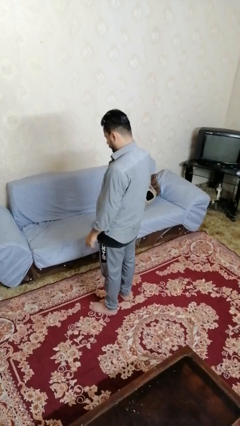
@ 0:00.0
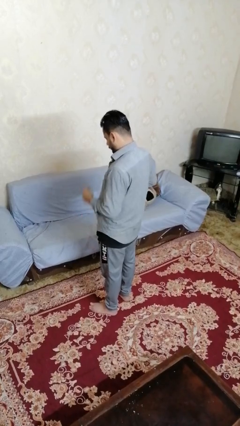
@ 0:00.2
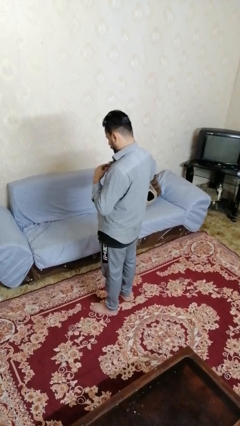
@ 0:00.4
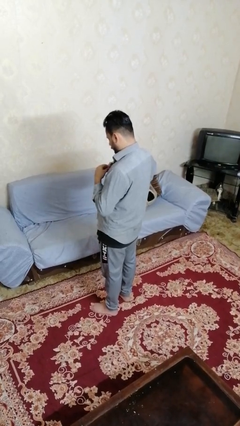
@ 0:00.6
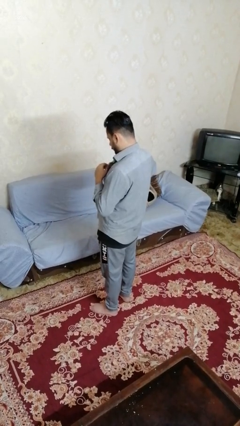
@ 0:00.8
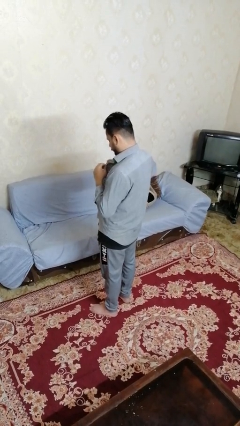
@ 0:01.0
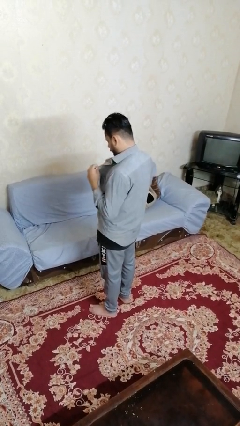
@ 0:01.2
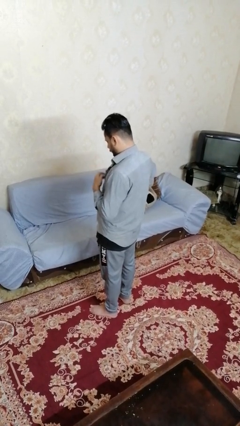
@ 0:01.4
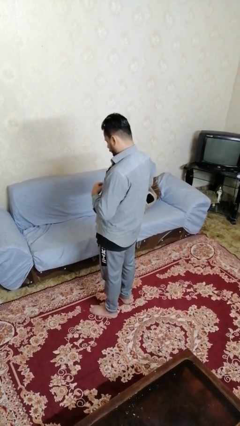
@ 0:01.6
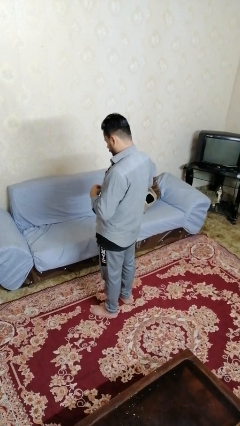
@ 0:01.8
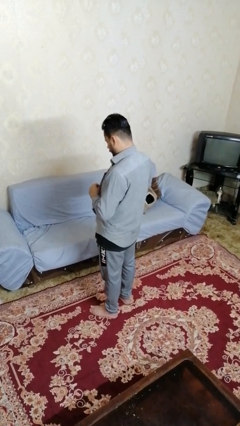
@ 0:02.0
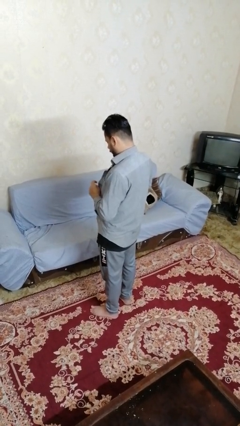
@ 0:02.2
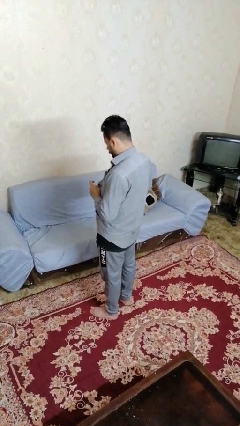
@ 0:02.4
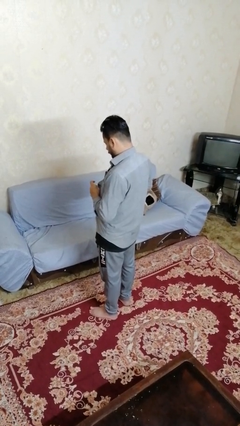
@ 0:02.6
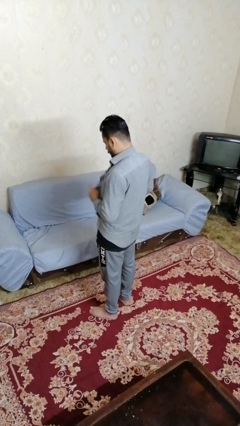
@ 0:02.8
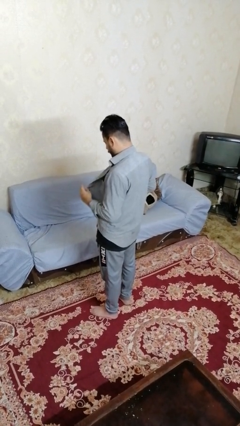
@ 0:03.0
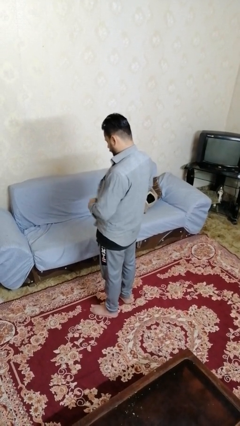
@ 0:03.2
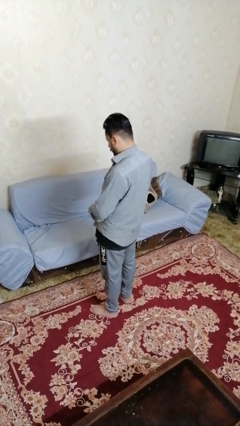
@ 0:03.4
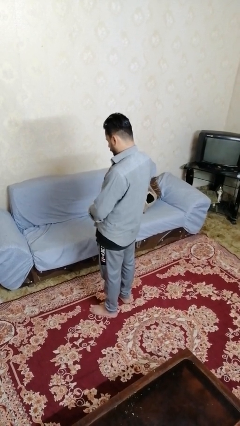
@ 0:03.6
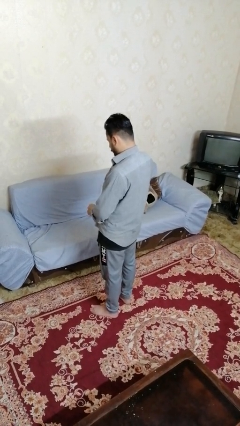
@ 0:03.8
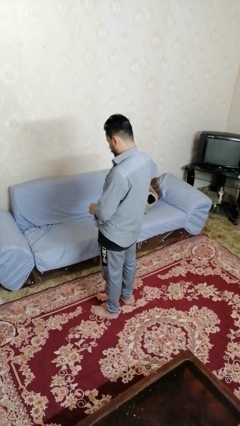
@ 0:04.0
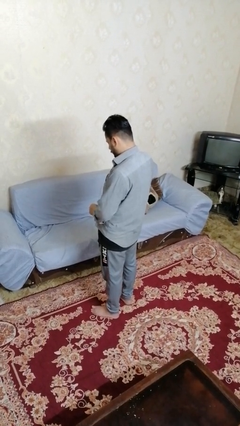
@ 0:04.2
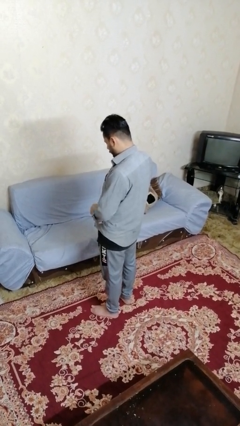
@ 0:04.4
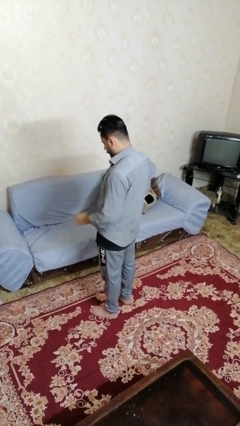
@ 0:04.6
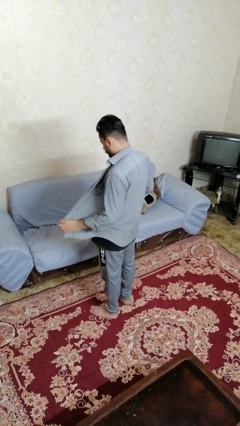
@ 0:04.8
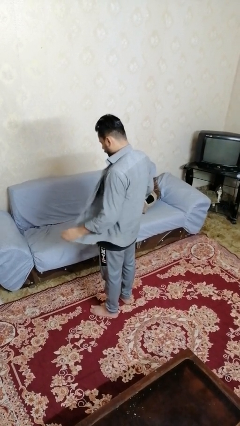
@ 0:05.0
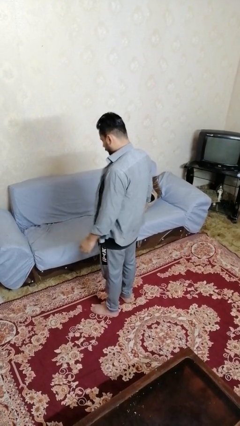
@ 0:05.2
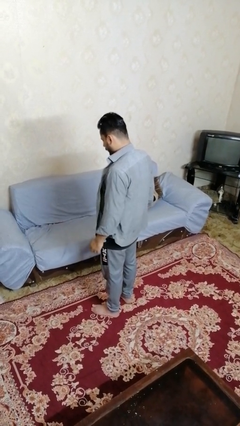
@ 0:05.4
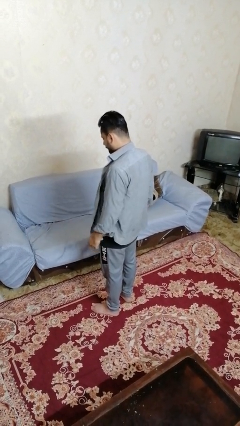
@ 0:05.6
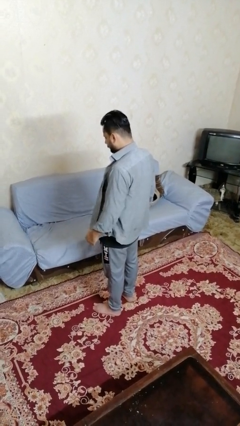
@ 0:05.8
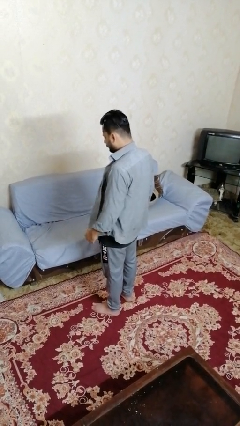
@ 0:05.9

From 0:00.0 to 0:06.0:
person unbuttons shirt

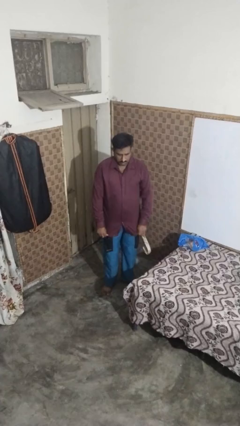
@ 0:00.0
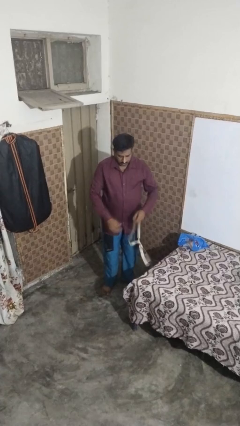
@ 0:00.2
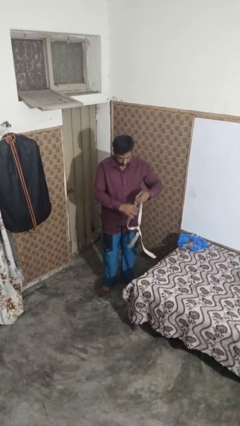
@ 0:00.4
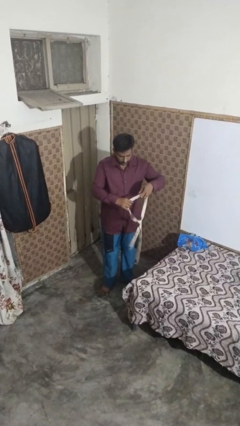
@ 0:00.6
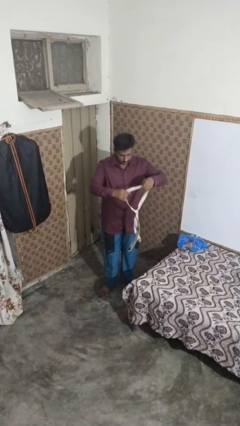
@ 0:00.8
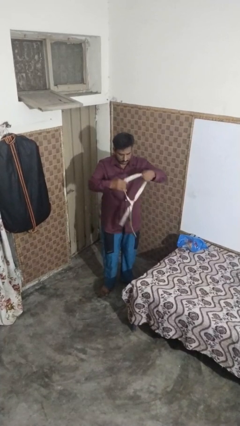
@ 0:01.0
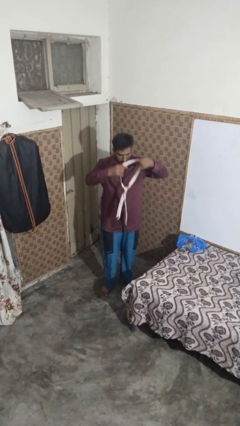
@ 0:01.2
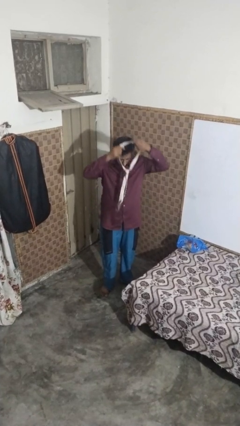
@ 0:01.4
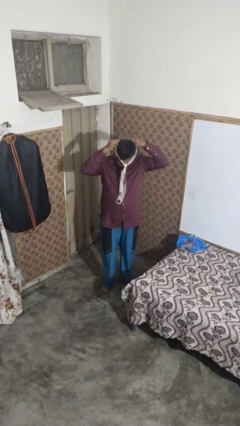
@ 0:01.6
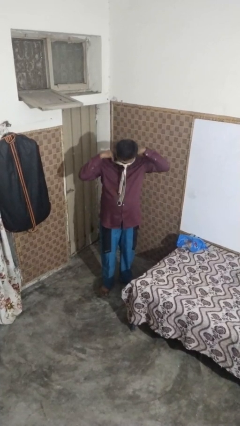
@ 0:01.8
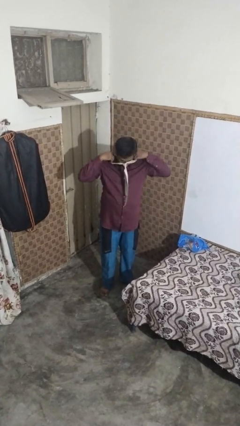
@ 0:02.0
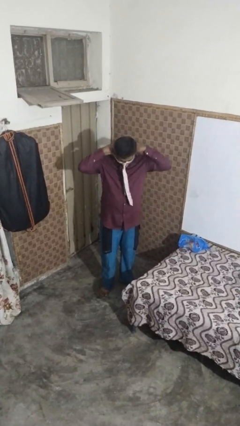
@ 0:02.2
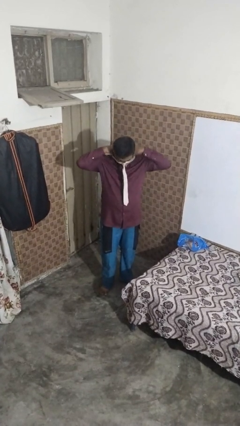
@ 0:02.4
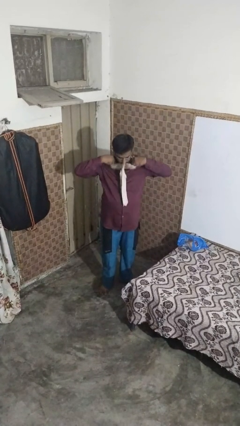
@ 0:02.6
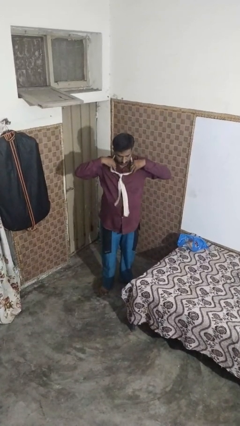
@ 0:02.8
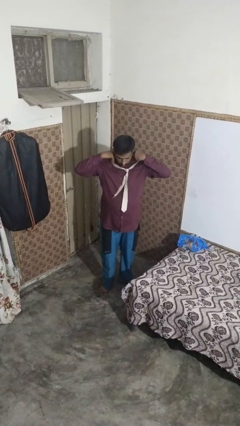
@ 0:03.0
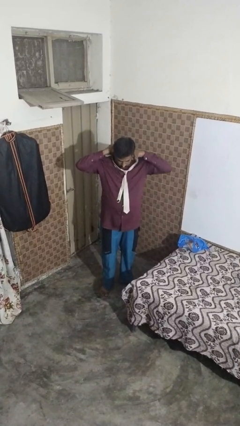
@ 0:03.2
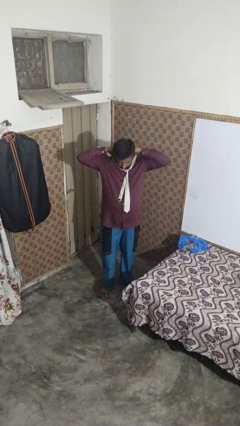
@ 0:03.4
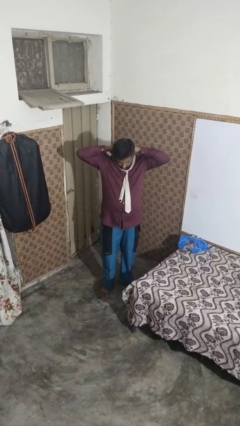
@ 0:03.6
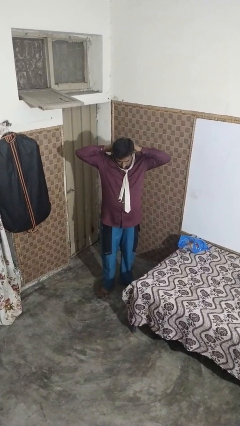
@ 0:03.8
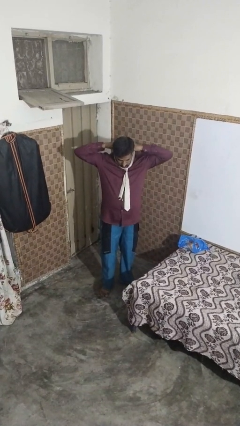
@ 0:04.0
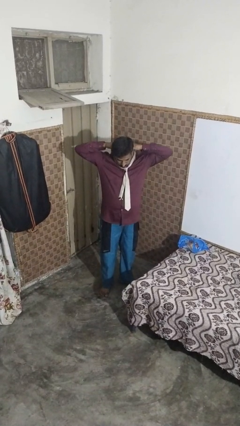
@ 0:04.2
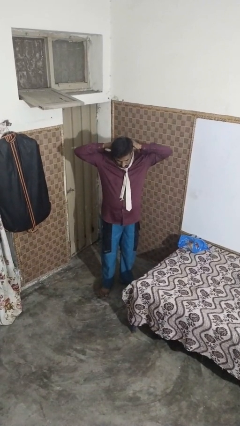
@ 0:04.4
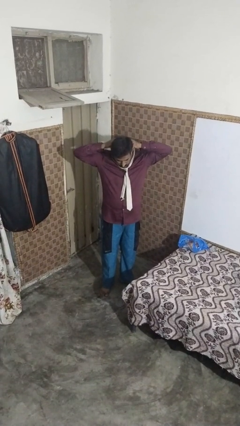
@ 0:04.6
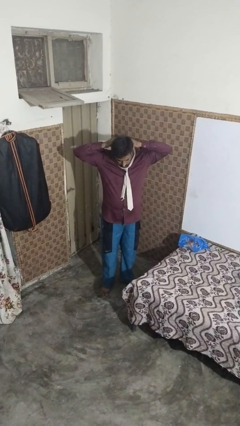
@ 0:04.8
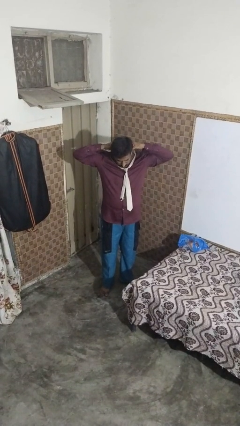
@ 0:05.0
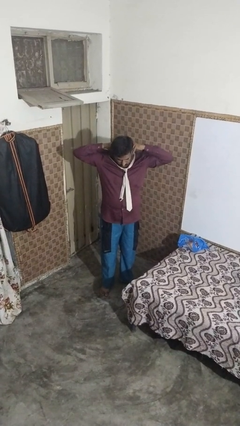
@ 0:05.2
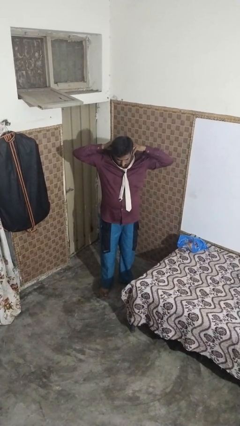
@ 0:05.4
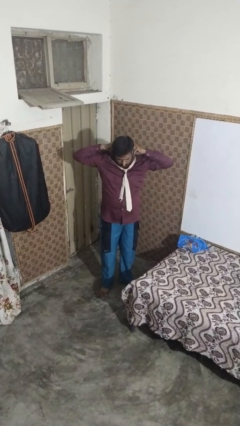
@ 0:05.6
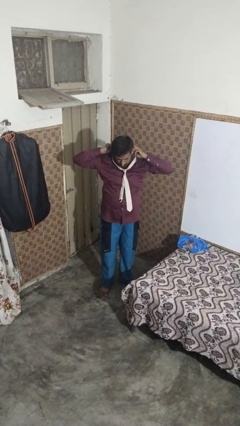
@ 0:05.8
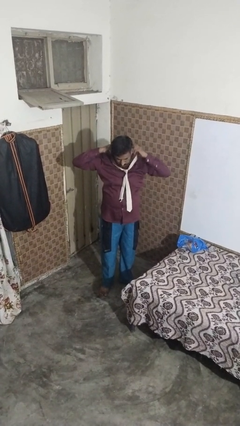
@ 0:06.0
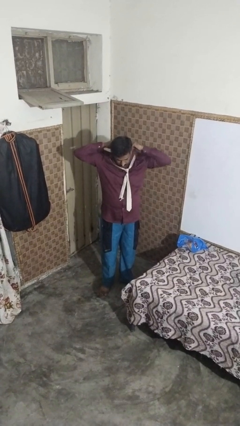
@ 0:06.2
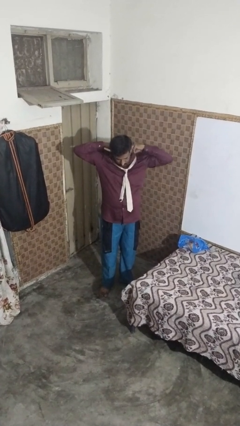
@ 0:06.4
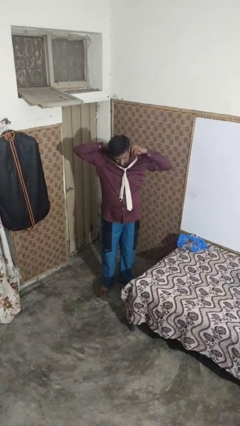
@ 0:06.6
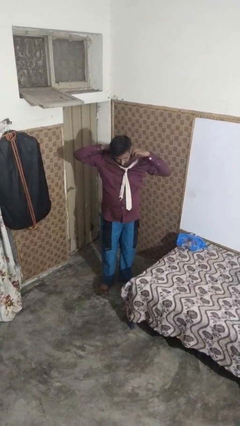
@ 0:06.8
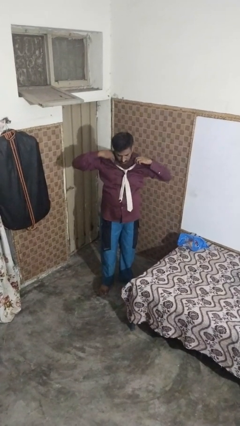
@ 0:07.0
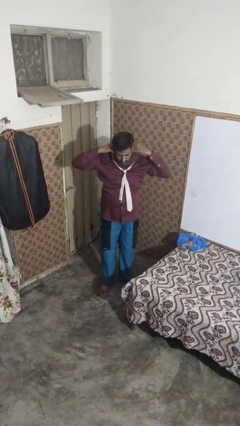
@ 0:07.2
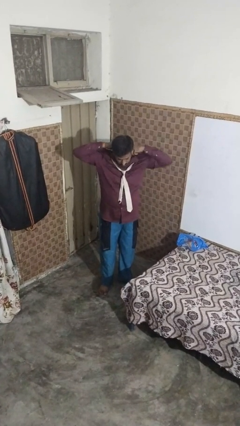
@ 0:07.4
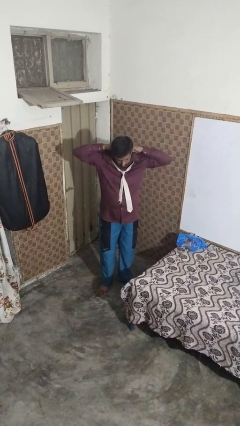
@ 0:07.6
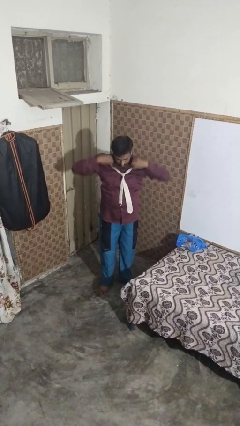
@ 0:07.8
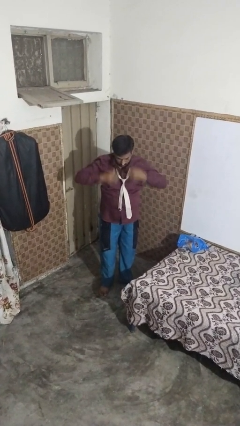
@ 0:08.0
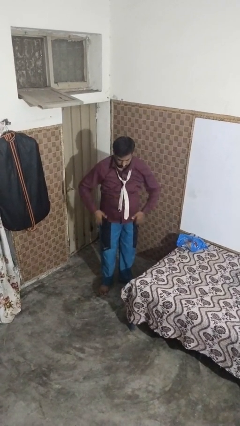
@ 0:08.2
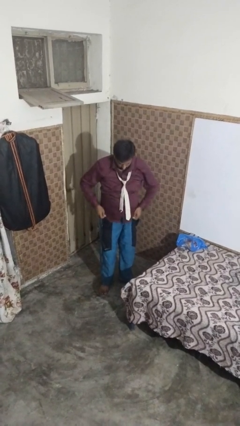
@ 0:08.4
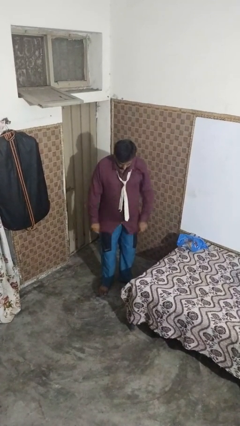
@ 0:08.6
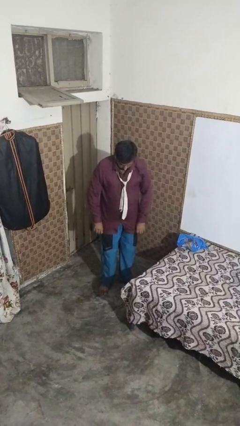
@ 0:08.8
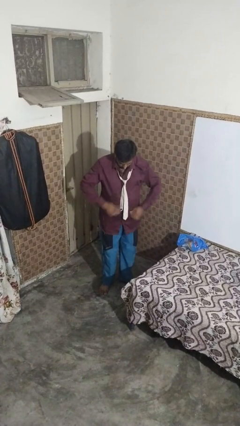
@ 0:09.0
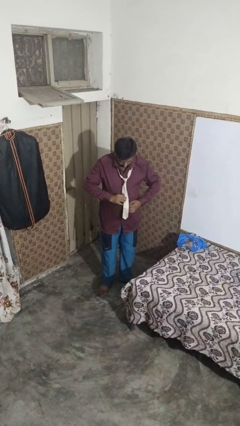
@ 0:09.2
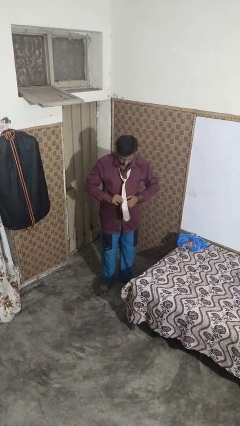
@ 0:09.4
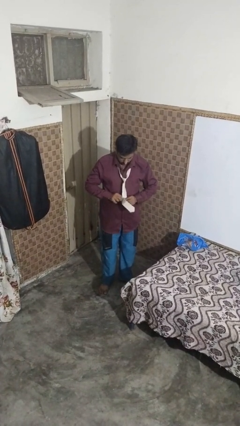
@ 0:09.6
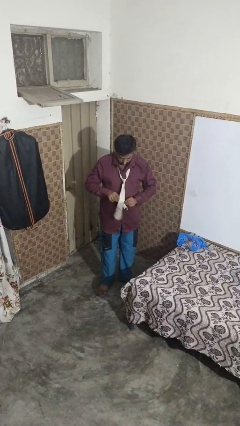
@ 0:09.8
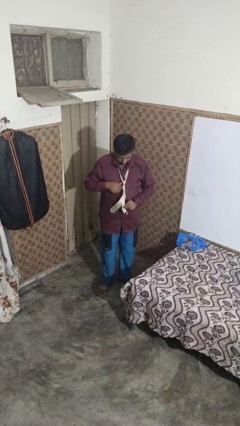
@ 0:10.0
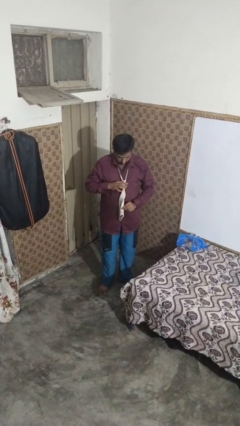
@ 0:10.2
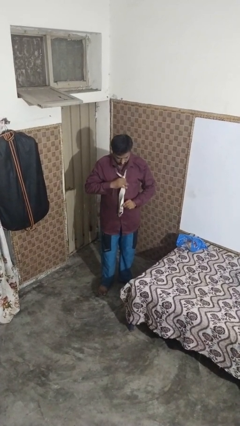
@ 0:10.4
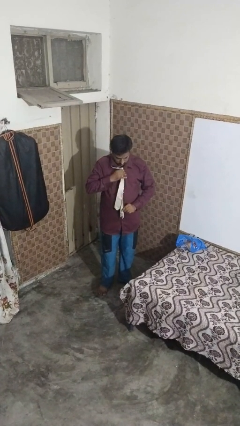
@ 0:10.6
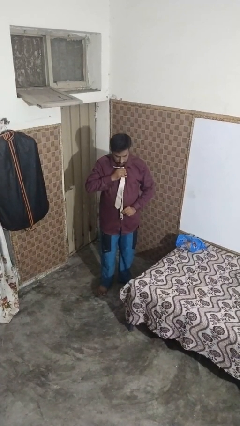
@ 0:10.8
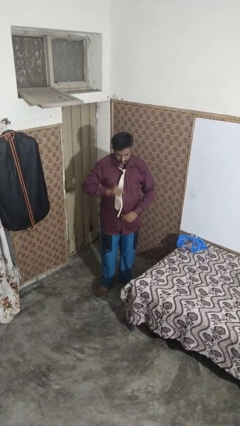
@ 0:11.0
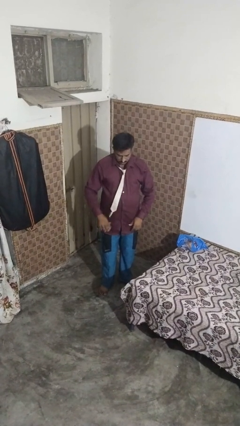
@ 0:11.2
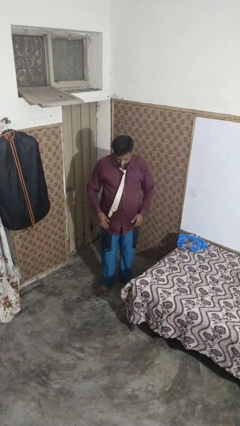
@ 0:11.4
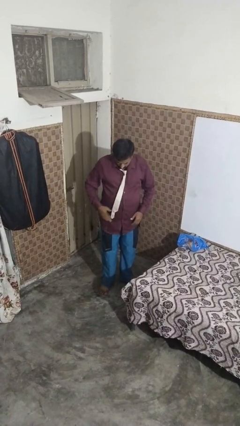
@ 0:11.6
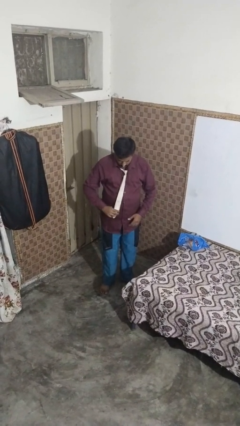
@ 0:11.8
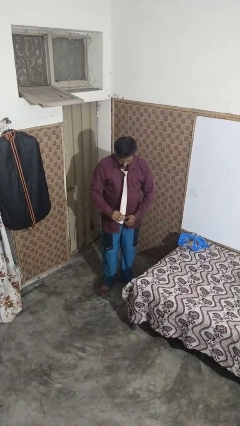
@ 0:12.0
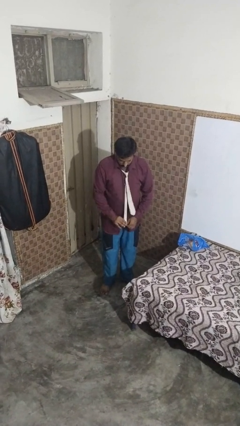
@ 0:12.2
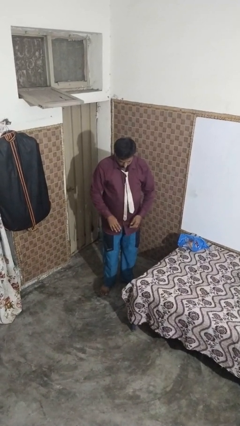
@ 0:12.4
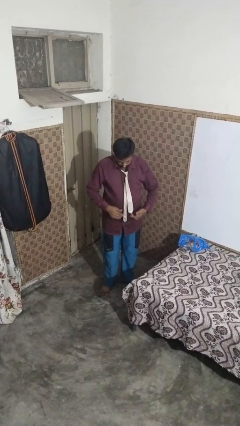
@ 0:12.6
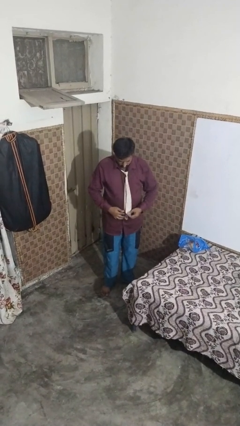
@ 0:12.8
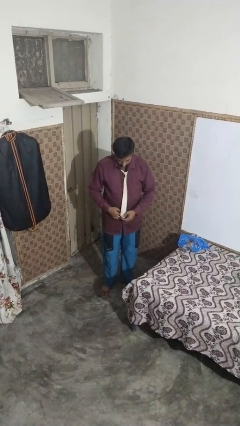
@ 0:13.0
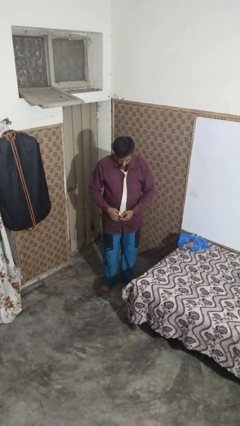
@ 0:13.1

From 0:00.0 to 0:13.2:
person puts on necktie
